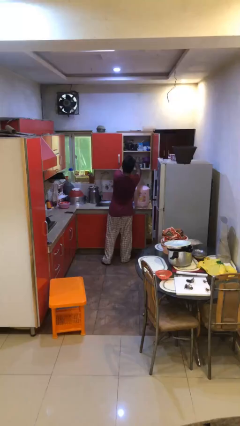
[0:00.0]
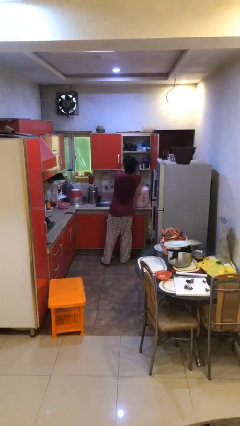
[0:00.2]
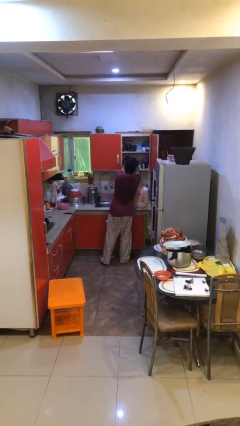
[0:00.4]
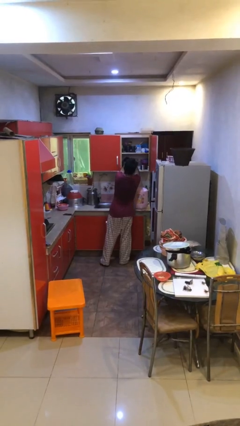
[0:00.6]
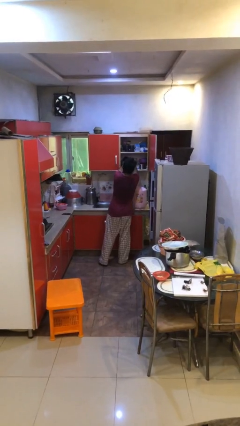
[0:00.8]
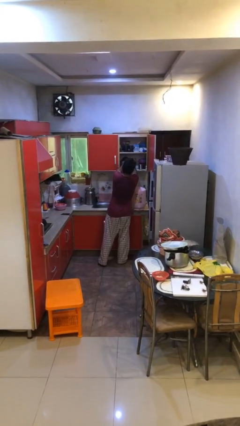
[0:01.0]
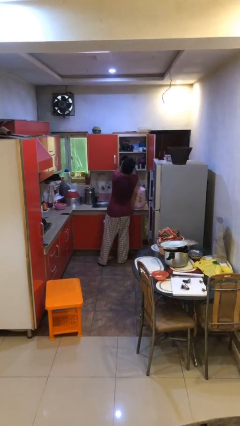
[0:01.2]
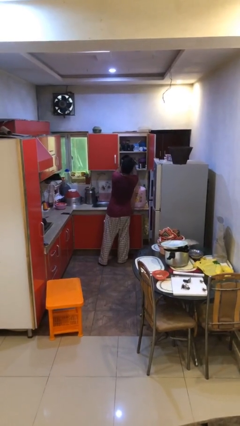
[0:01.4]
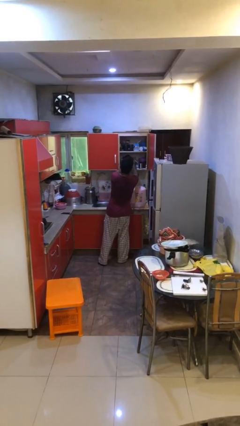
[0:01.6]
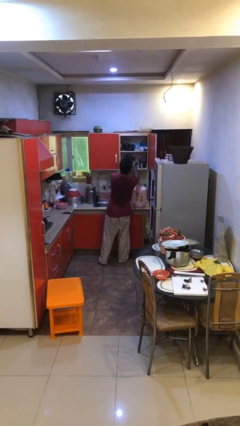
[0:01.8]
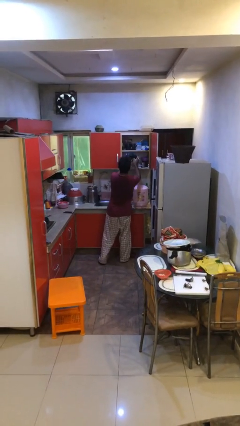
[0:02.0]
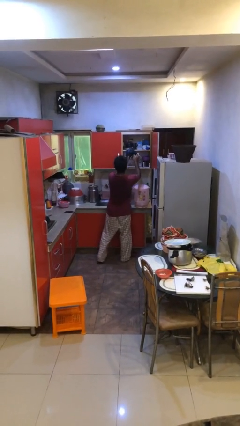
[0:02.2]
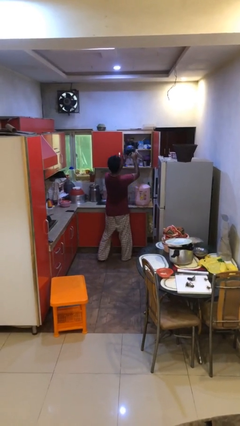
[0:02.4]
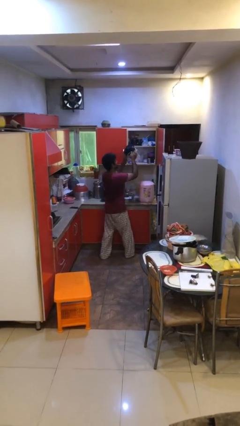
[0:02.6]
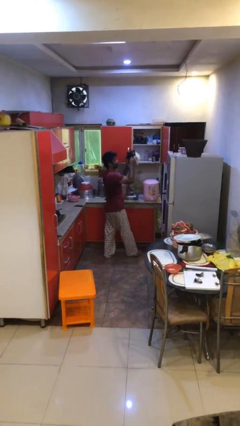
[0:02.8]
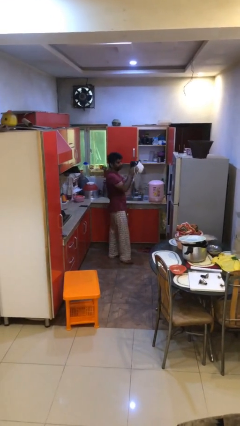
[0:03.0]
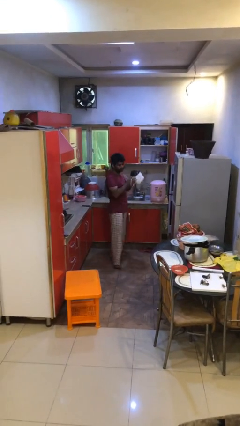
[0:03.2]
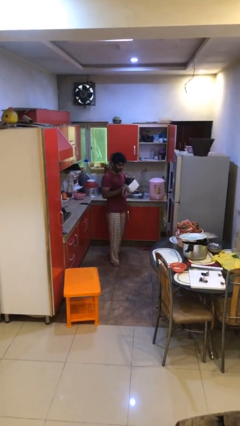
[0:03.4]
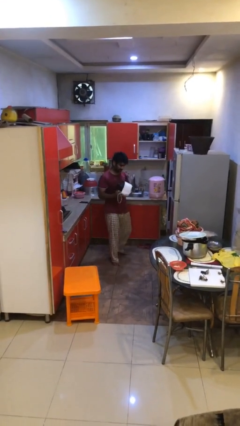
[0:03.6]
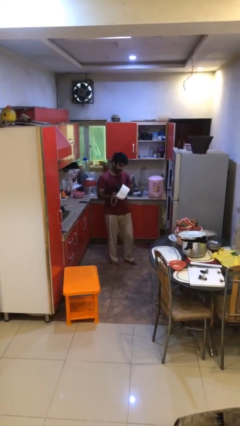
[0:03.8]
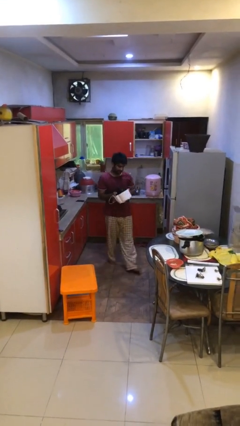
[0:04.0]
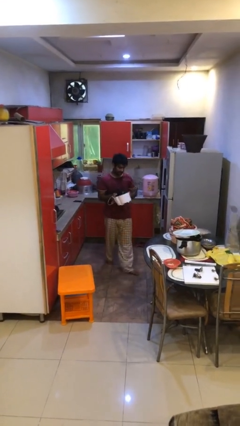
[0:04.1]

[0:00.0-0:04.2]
person picks up object from shelf

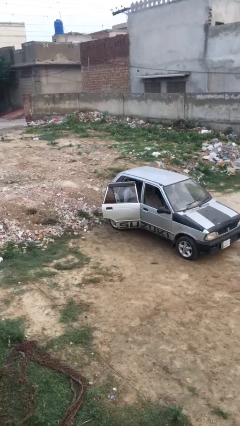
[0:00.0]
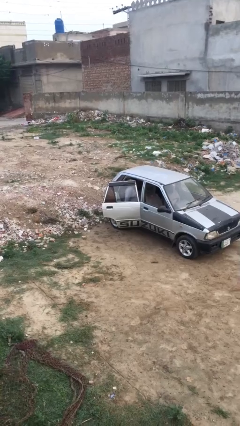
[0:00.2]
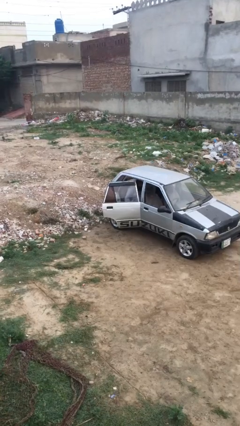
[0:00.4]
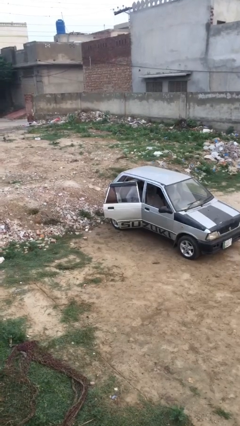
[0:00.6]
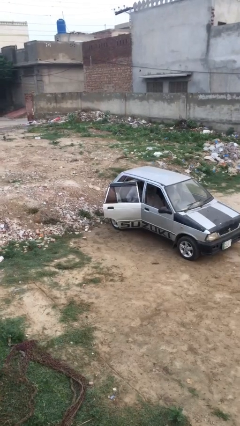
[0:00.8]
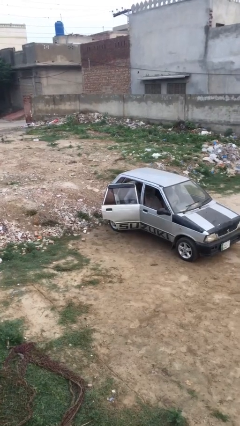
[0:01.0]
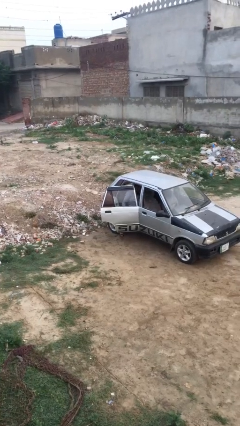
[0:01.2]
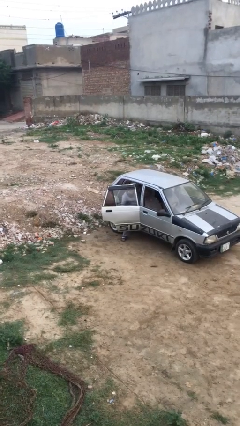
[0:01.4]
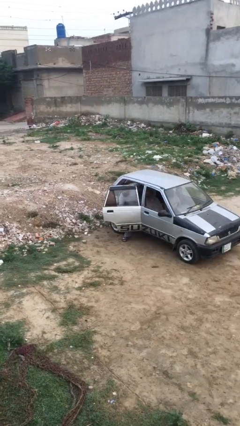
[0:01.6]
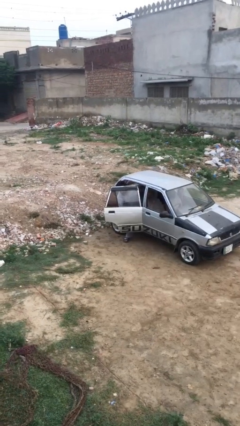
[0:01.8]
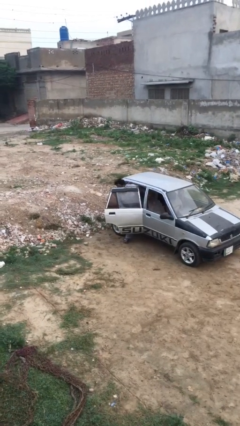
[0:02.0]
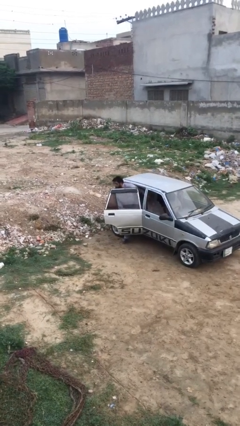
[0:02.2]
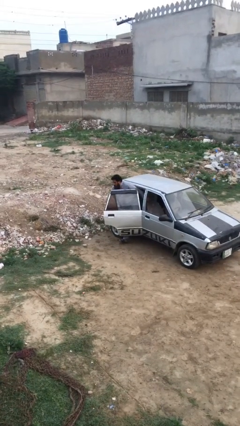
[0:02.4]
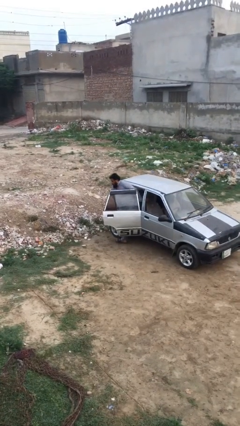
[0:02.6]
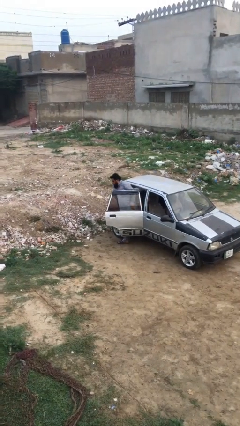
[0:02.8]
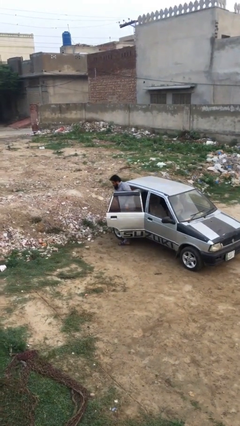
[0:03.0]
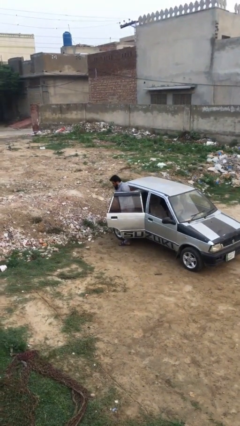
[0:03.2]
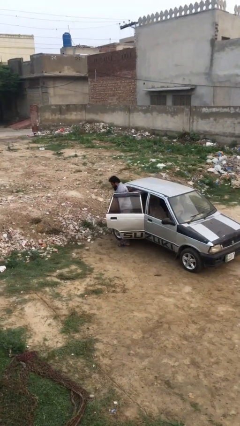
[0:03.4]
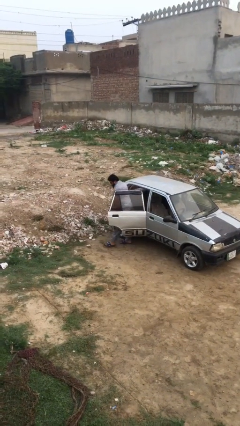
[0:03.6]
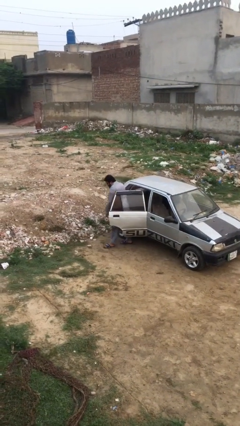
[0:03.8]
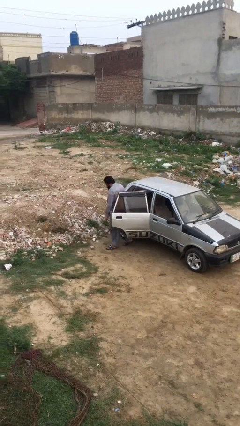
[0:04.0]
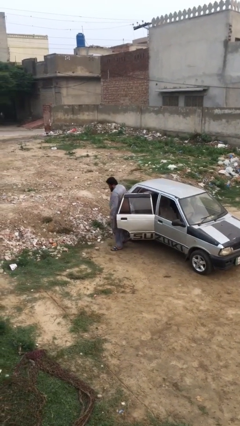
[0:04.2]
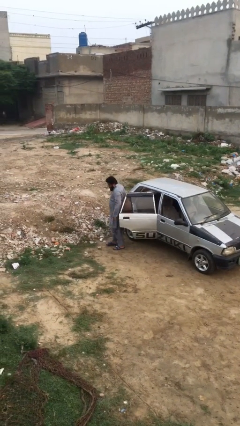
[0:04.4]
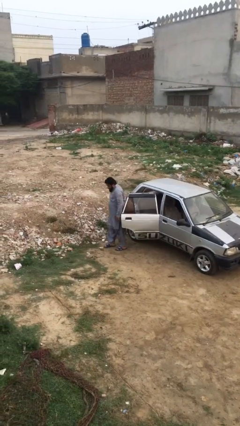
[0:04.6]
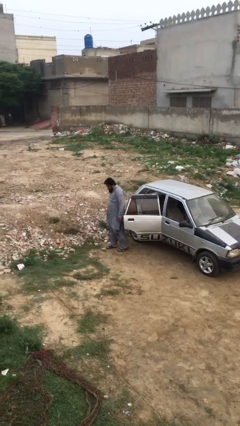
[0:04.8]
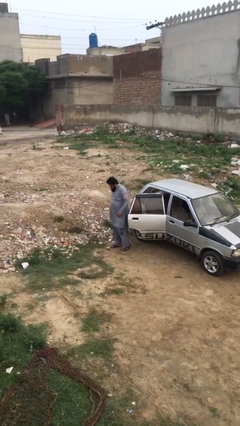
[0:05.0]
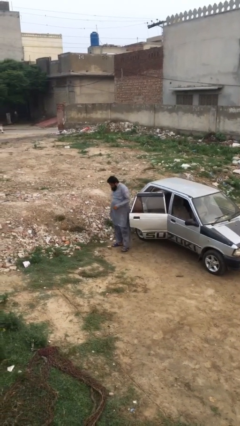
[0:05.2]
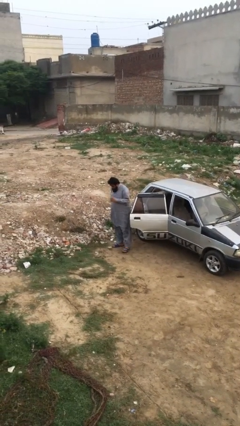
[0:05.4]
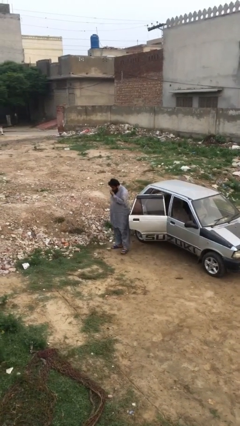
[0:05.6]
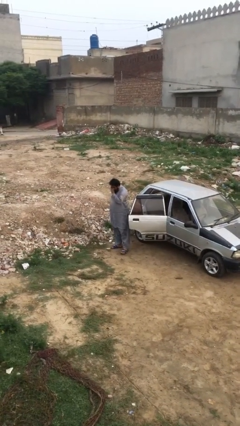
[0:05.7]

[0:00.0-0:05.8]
person exits car

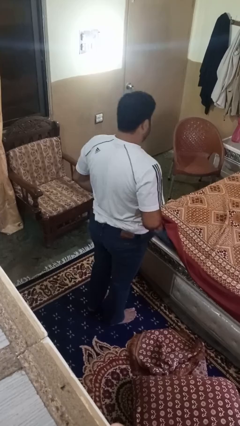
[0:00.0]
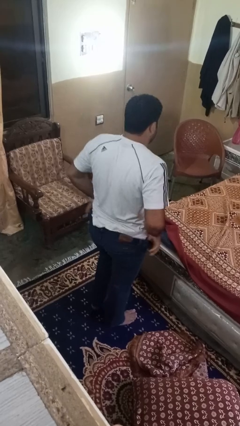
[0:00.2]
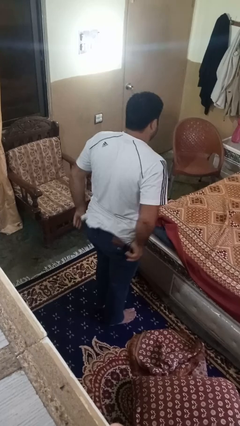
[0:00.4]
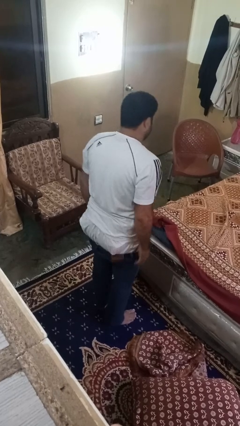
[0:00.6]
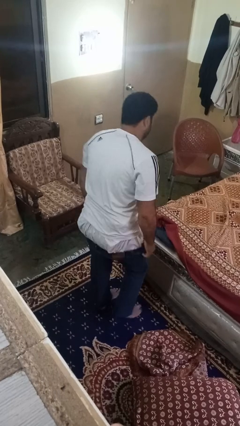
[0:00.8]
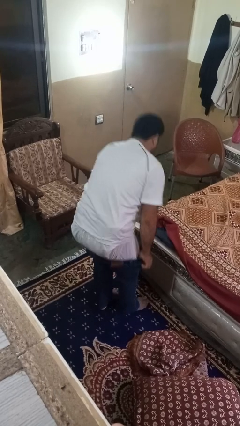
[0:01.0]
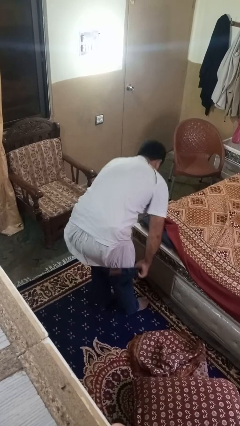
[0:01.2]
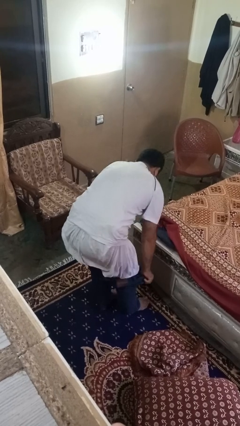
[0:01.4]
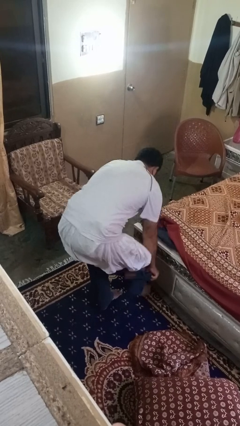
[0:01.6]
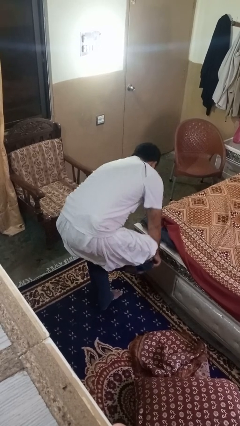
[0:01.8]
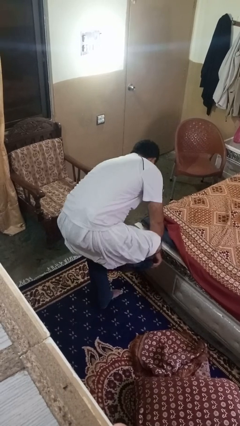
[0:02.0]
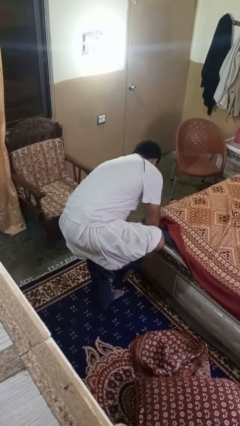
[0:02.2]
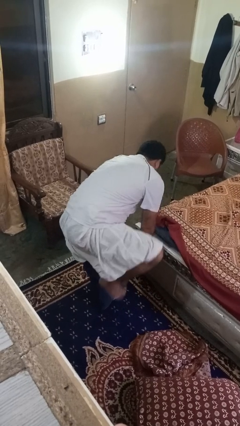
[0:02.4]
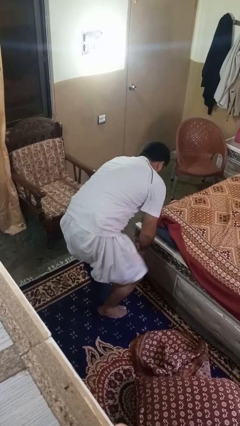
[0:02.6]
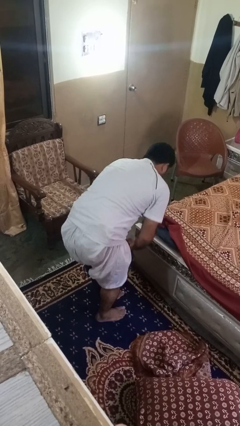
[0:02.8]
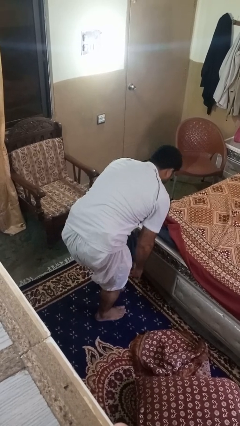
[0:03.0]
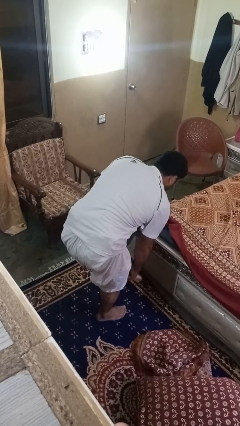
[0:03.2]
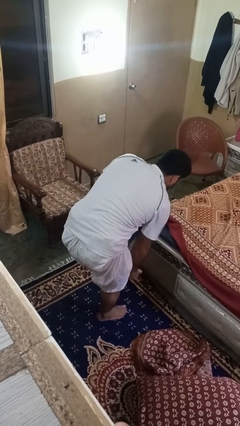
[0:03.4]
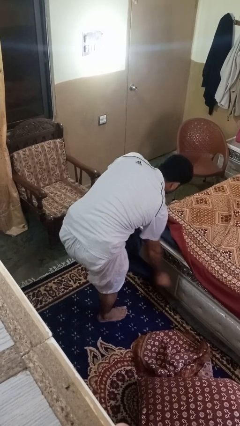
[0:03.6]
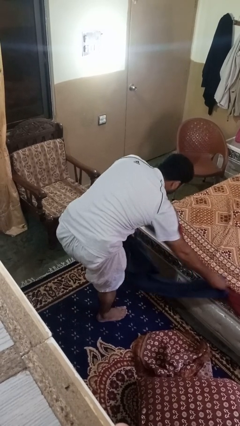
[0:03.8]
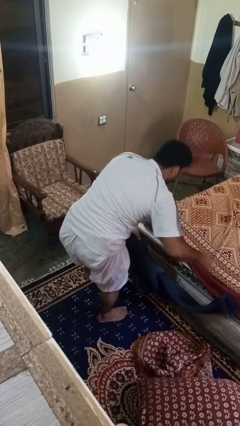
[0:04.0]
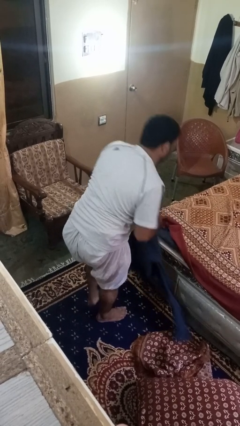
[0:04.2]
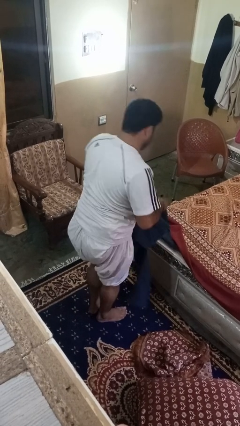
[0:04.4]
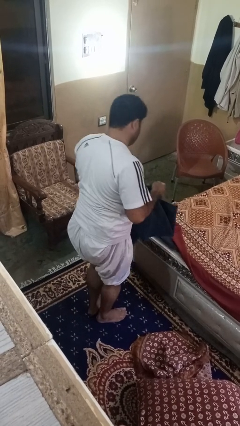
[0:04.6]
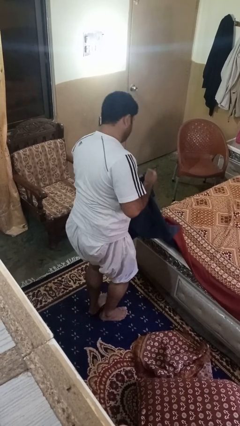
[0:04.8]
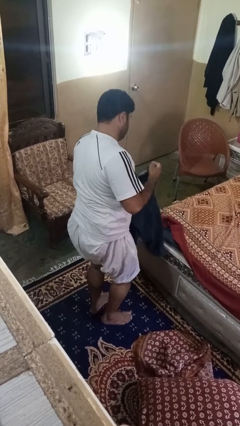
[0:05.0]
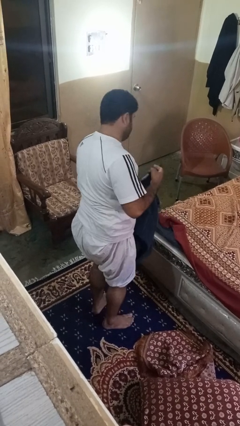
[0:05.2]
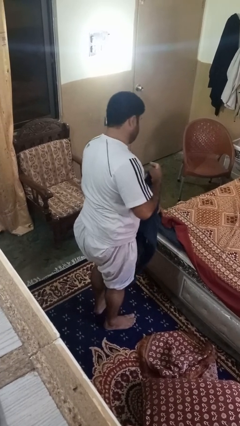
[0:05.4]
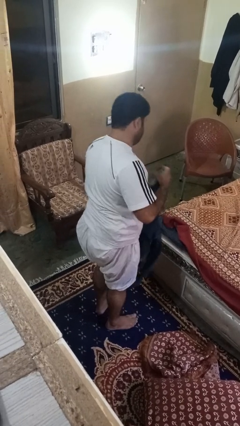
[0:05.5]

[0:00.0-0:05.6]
person takes off pants

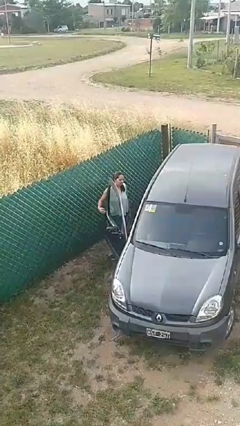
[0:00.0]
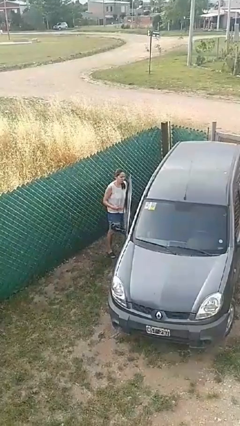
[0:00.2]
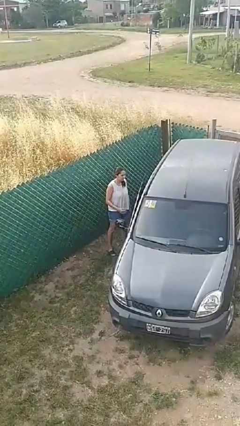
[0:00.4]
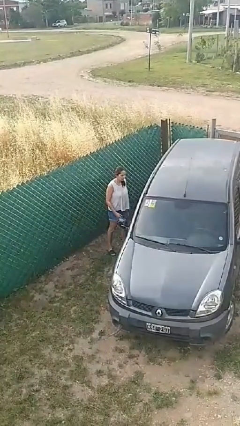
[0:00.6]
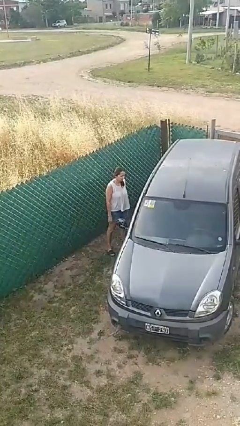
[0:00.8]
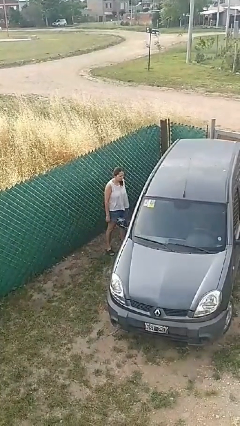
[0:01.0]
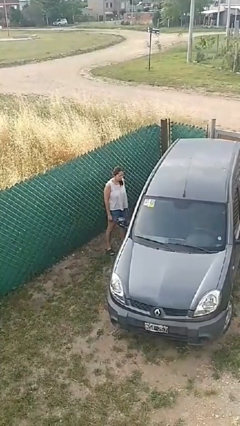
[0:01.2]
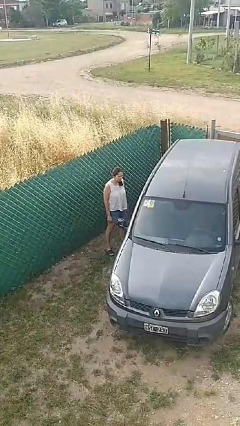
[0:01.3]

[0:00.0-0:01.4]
person closes car door

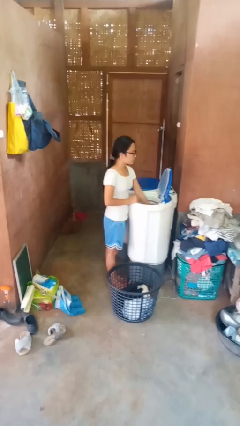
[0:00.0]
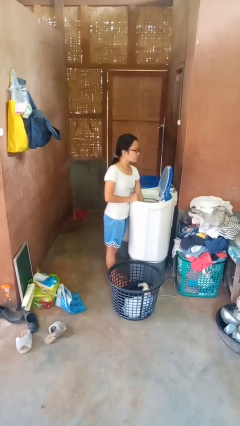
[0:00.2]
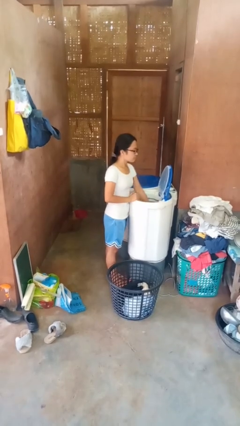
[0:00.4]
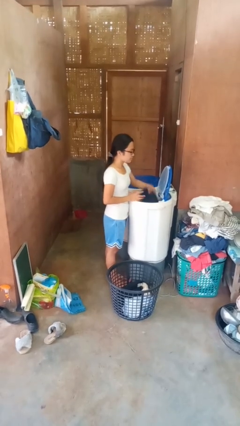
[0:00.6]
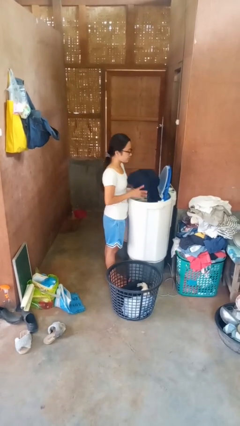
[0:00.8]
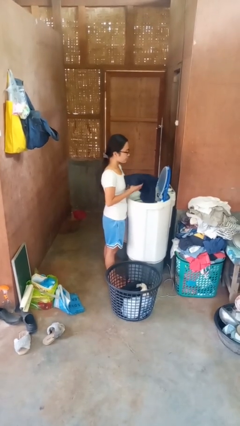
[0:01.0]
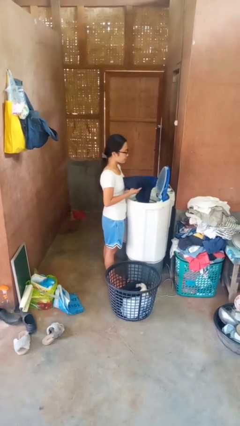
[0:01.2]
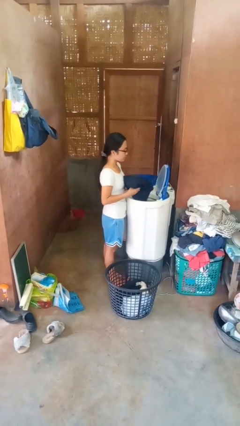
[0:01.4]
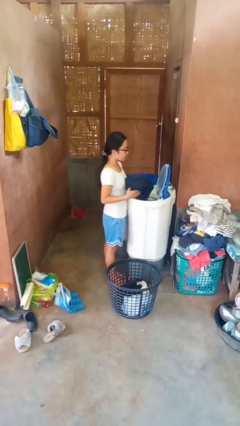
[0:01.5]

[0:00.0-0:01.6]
person unloads dryer
